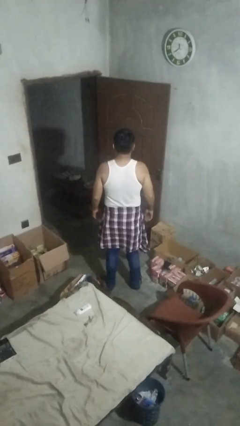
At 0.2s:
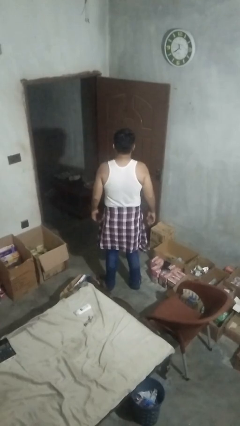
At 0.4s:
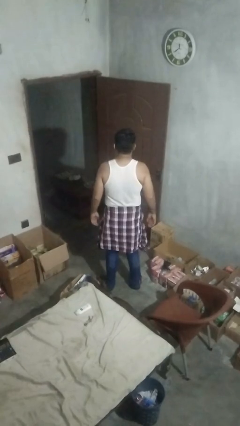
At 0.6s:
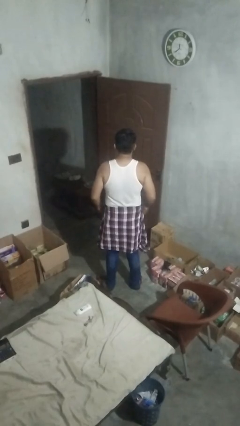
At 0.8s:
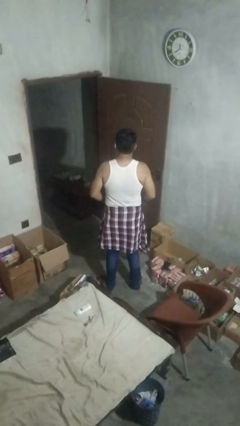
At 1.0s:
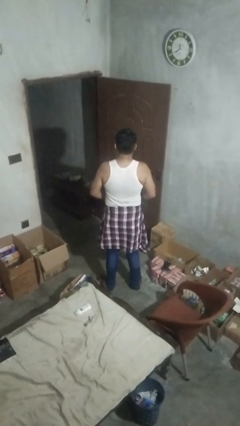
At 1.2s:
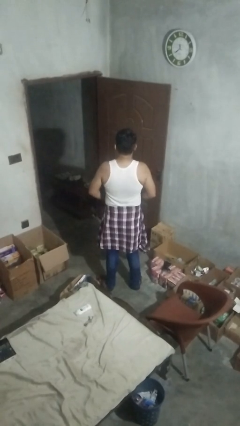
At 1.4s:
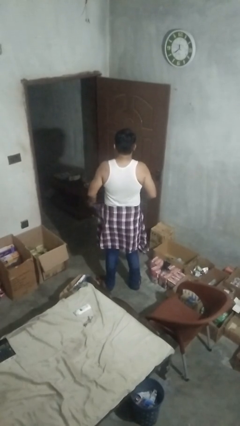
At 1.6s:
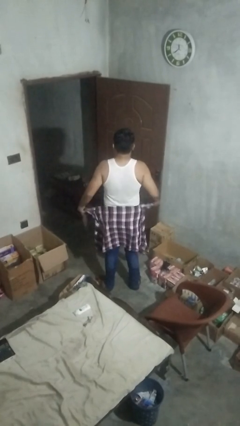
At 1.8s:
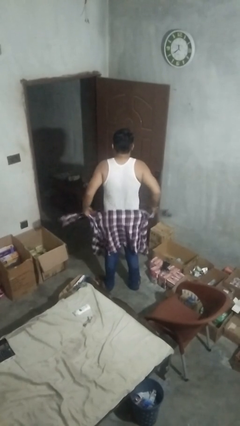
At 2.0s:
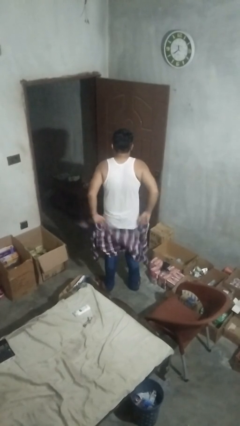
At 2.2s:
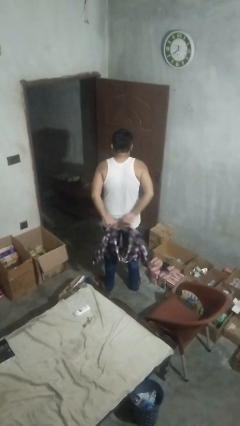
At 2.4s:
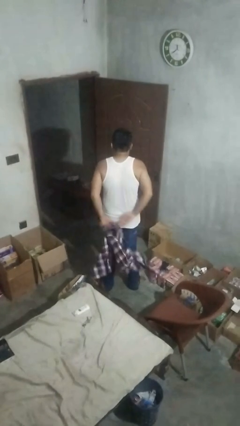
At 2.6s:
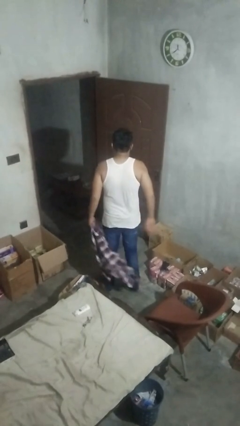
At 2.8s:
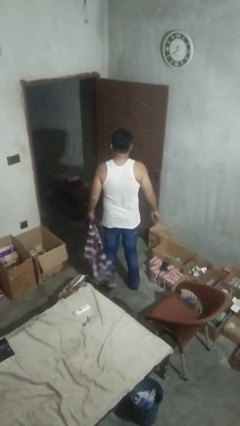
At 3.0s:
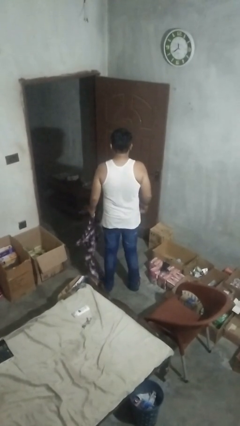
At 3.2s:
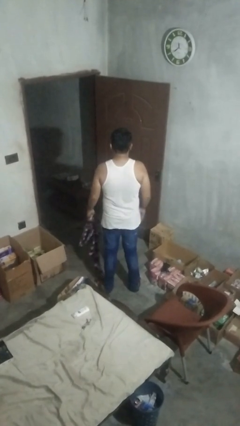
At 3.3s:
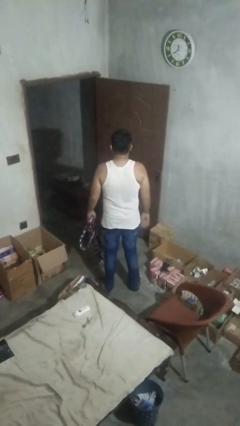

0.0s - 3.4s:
person unties jacket around waist

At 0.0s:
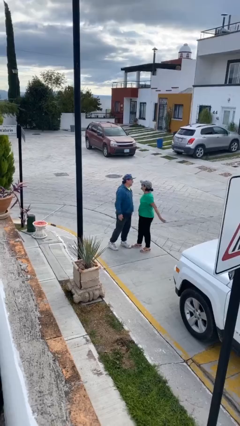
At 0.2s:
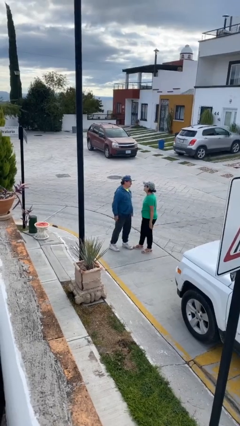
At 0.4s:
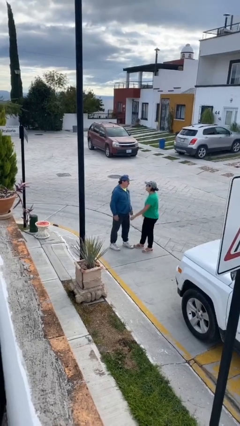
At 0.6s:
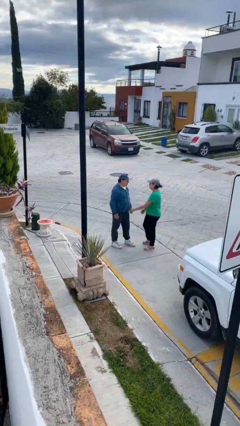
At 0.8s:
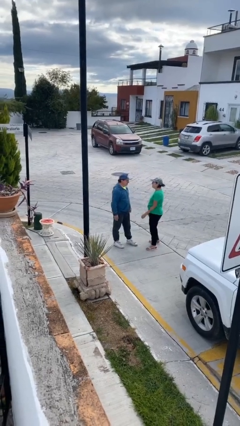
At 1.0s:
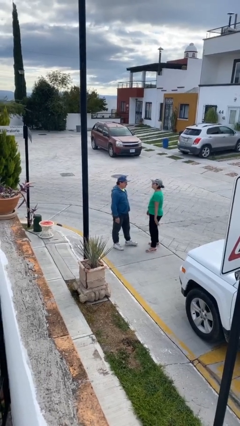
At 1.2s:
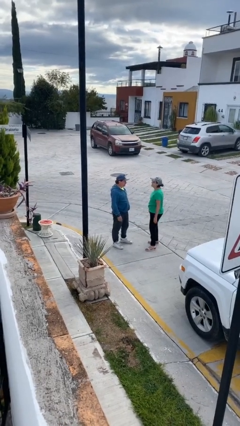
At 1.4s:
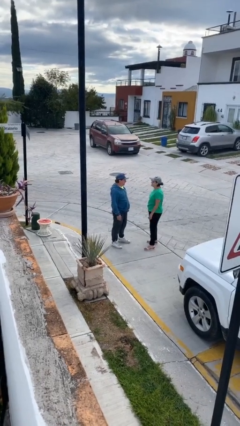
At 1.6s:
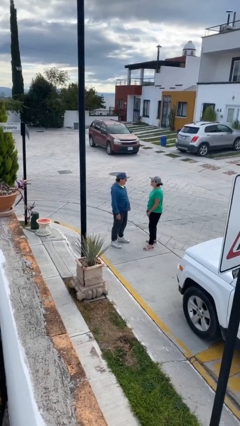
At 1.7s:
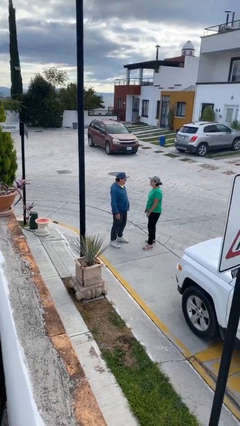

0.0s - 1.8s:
person talks to person

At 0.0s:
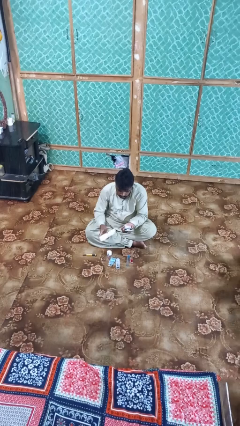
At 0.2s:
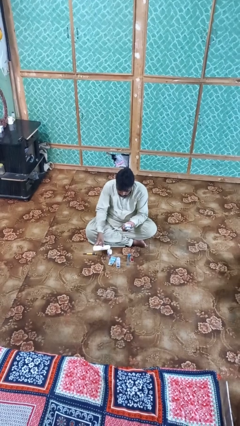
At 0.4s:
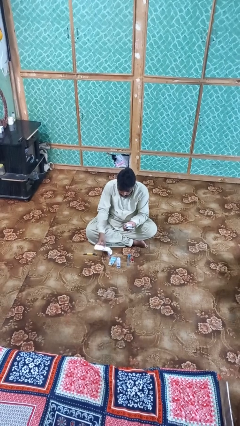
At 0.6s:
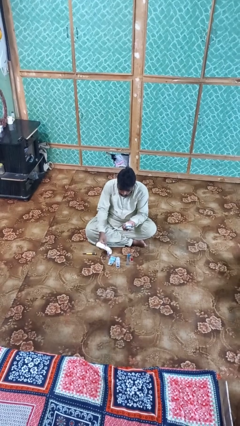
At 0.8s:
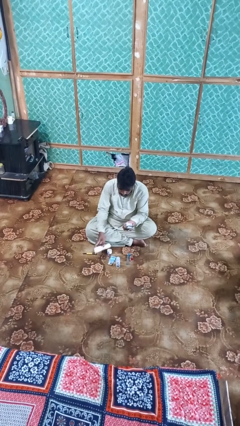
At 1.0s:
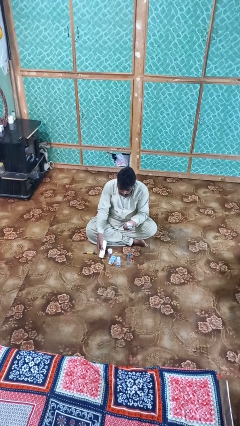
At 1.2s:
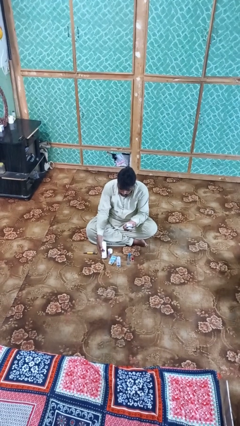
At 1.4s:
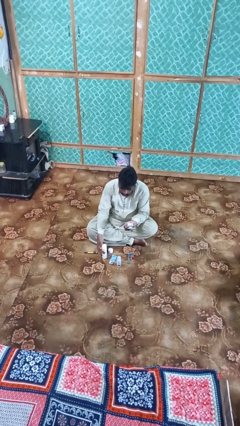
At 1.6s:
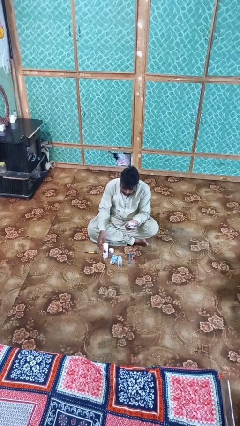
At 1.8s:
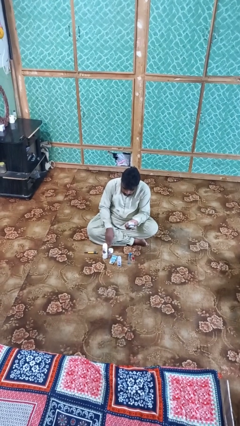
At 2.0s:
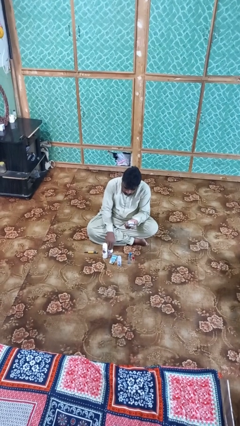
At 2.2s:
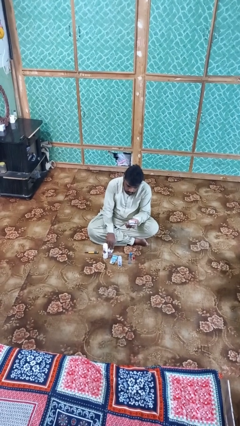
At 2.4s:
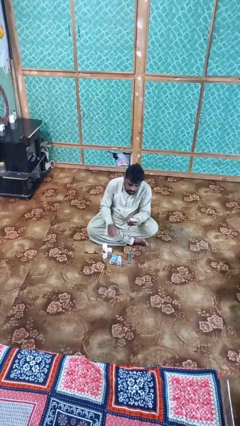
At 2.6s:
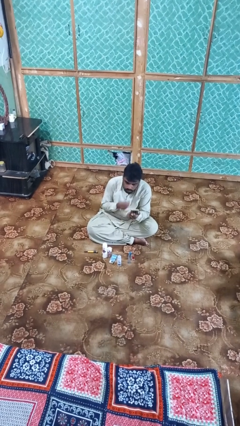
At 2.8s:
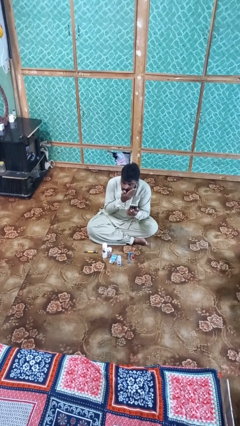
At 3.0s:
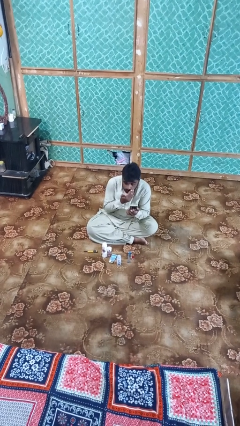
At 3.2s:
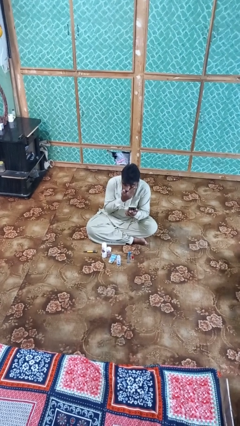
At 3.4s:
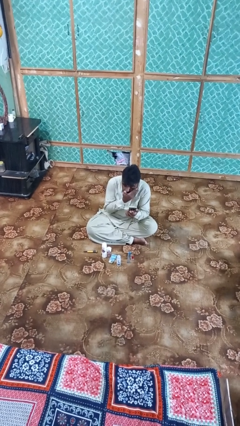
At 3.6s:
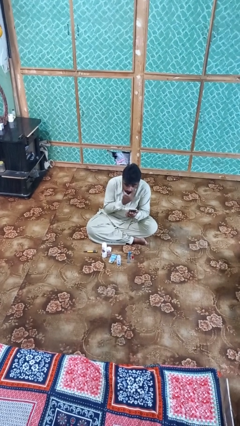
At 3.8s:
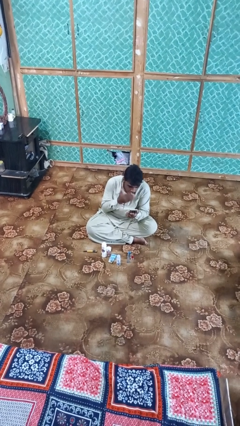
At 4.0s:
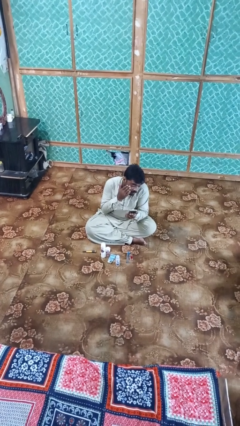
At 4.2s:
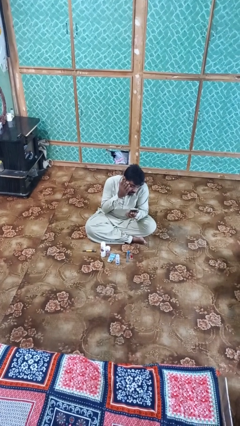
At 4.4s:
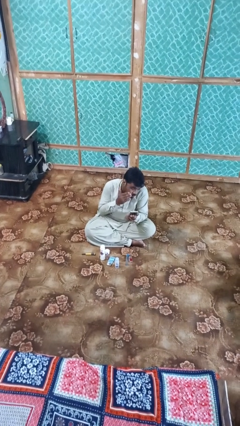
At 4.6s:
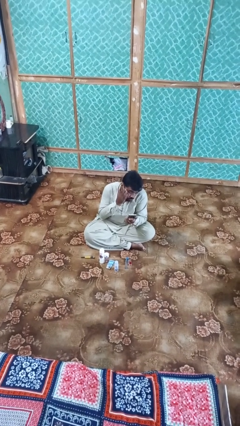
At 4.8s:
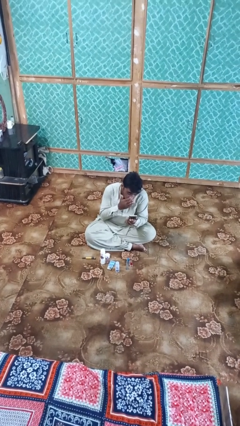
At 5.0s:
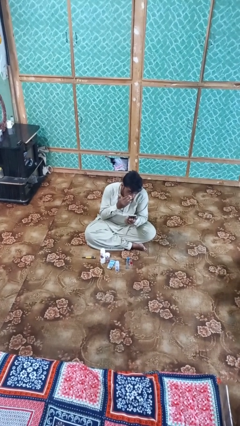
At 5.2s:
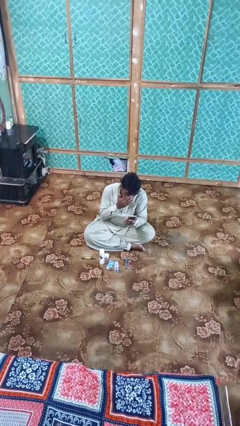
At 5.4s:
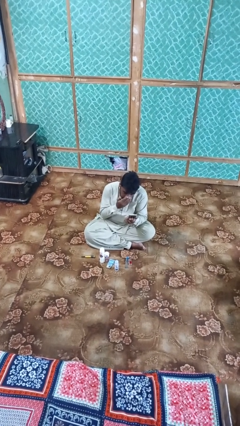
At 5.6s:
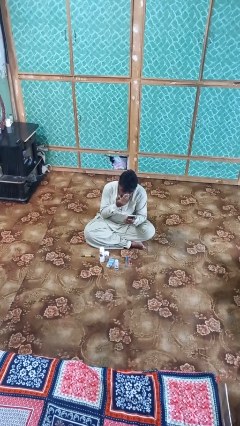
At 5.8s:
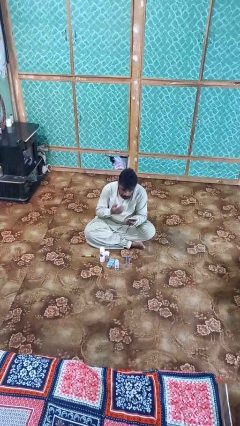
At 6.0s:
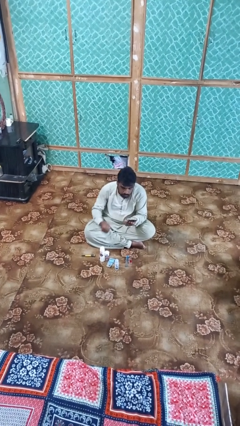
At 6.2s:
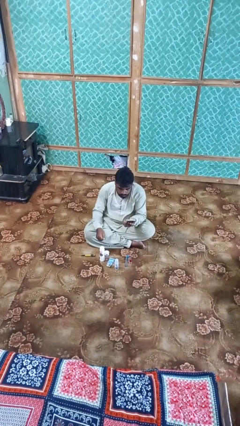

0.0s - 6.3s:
person applies foundation makeup

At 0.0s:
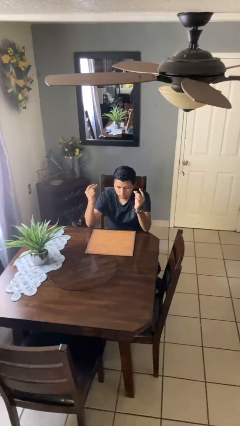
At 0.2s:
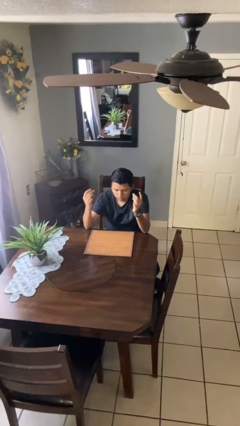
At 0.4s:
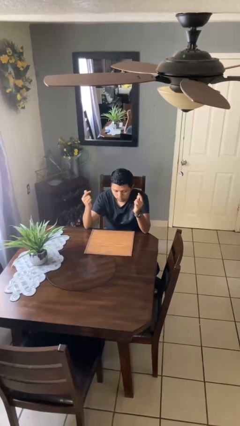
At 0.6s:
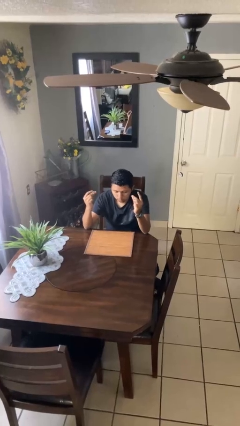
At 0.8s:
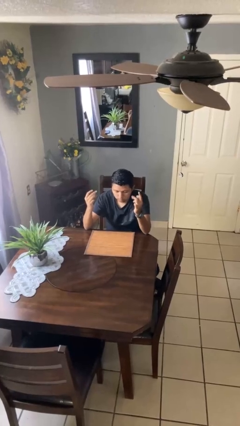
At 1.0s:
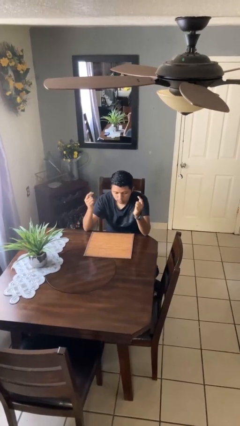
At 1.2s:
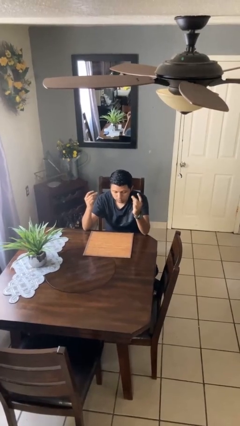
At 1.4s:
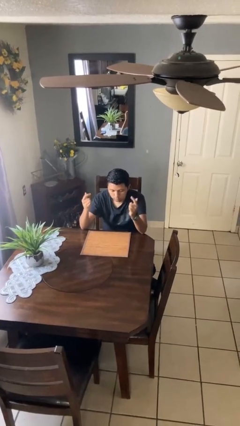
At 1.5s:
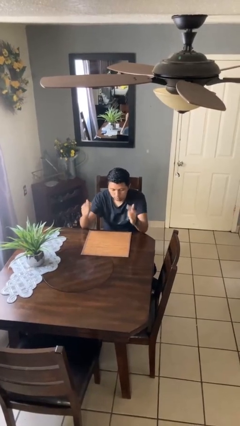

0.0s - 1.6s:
person snaps fingers

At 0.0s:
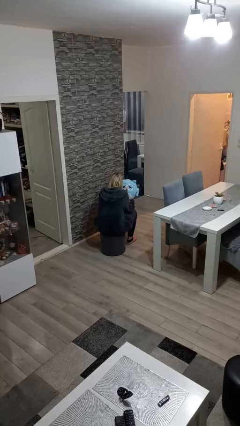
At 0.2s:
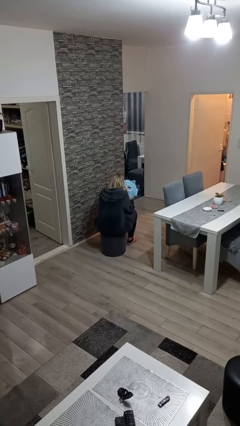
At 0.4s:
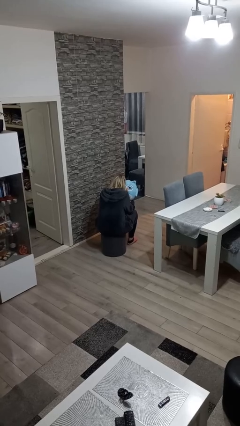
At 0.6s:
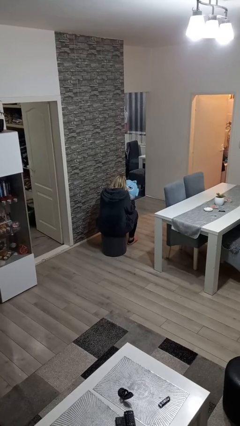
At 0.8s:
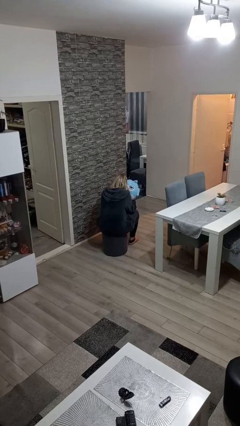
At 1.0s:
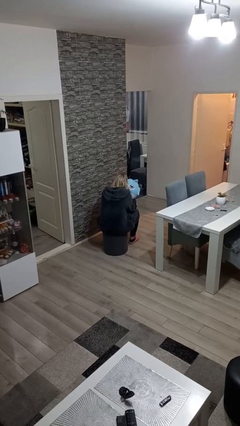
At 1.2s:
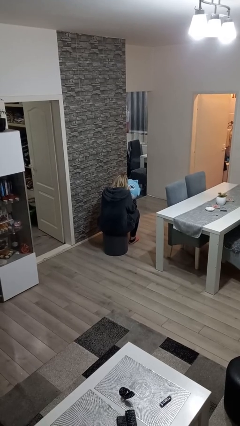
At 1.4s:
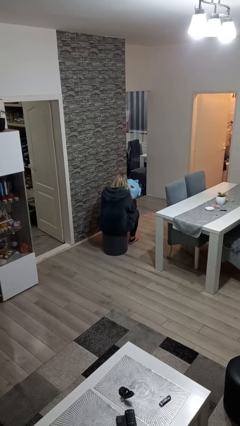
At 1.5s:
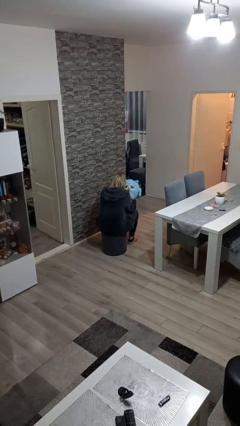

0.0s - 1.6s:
person hugs stuffed animal

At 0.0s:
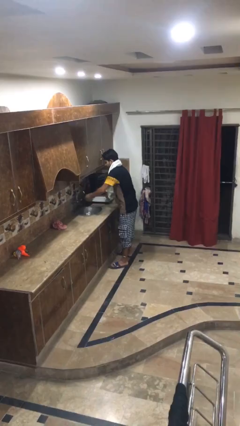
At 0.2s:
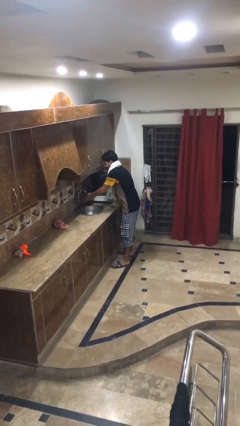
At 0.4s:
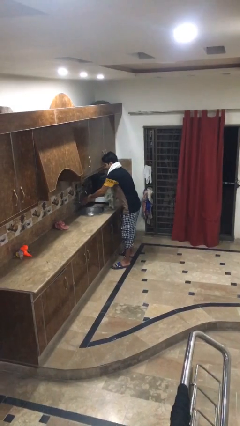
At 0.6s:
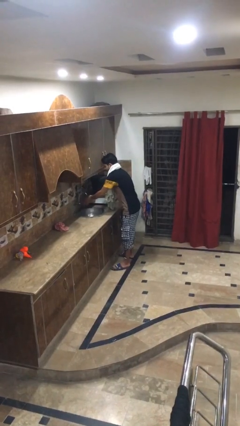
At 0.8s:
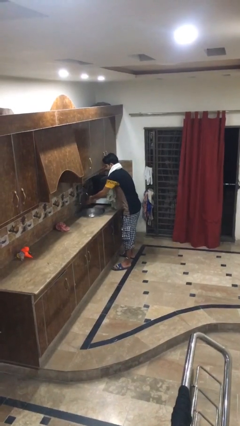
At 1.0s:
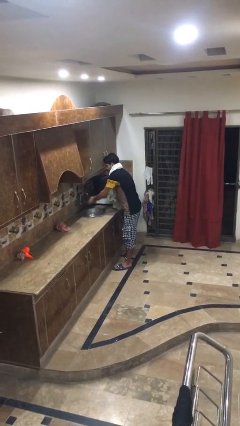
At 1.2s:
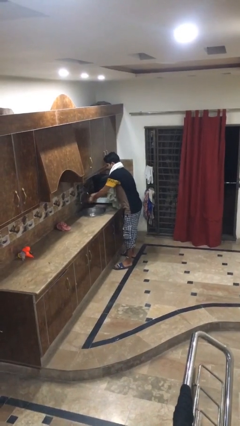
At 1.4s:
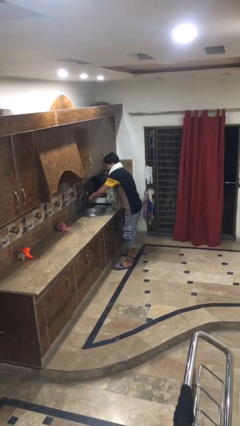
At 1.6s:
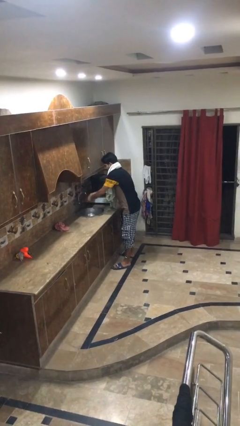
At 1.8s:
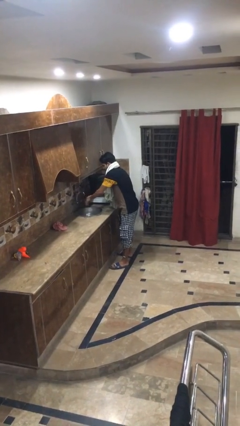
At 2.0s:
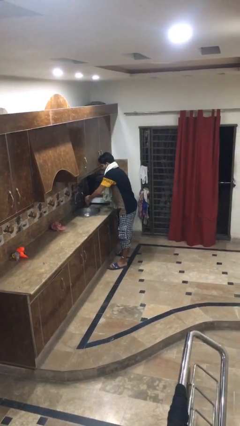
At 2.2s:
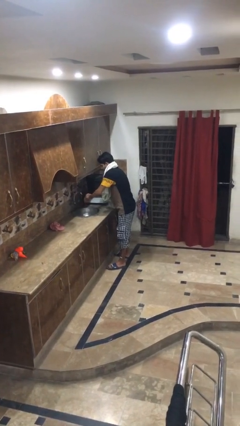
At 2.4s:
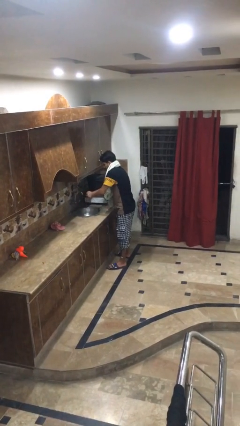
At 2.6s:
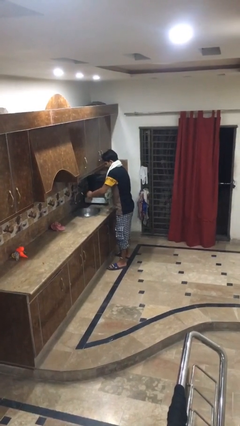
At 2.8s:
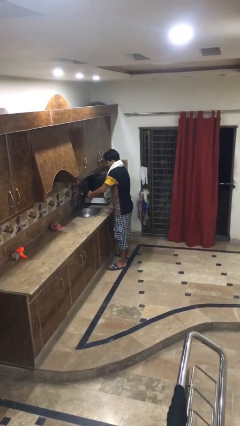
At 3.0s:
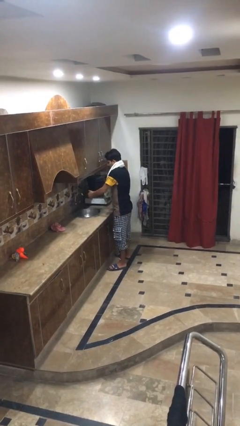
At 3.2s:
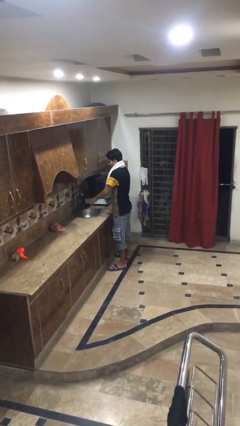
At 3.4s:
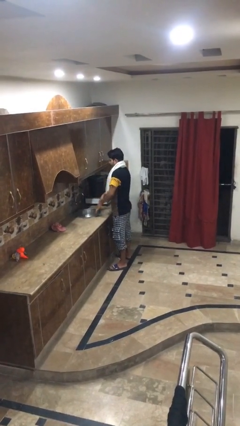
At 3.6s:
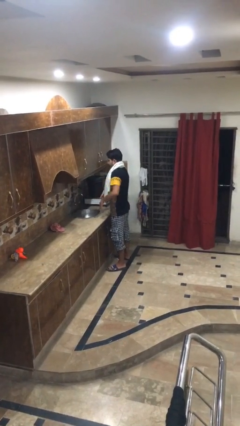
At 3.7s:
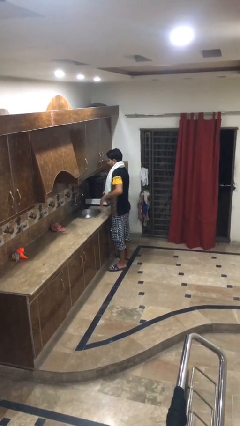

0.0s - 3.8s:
person washes hands
